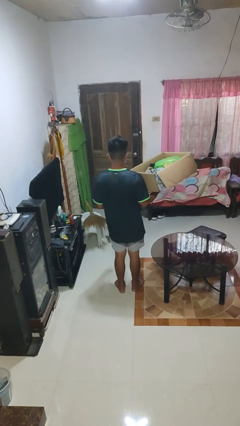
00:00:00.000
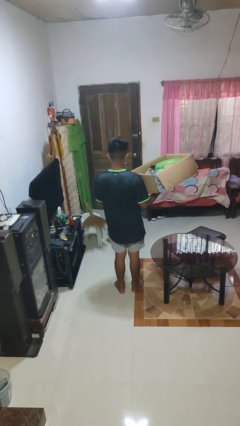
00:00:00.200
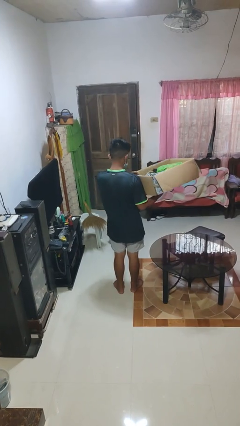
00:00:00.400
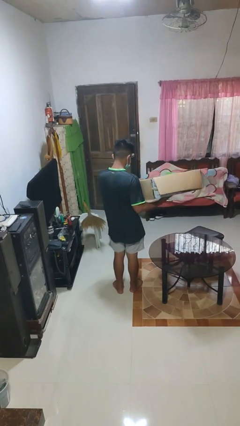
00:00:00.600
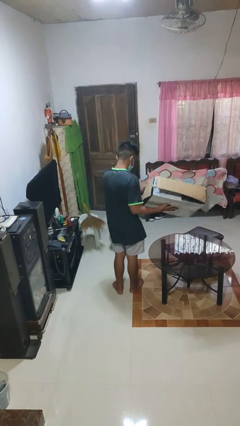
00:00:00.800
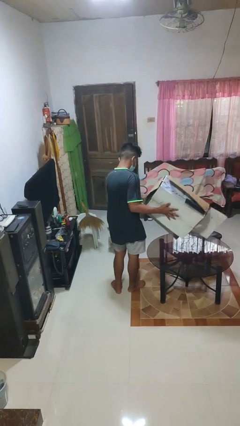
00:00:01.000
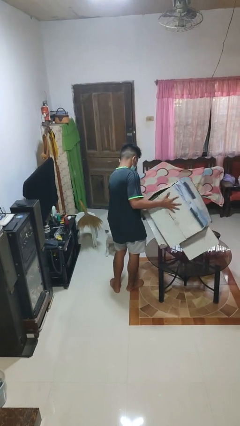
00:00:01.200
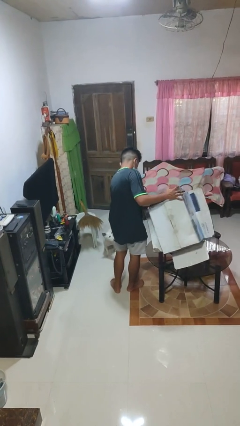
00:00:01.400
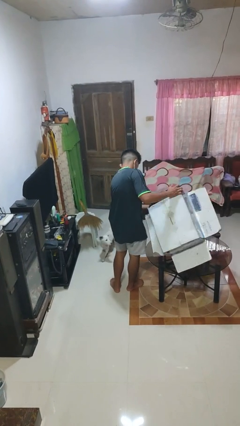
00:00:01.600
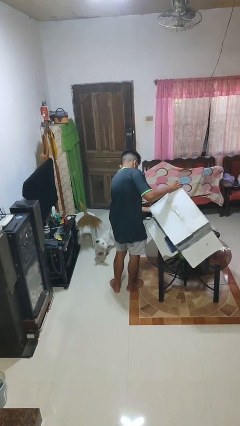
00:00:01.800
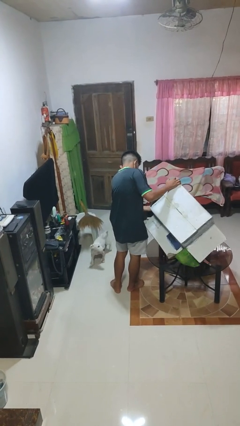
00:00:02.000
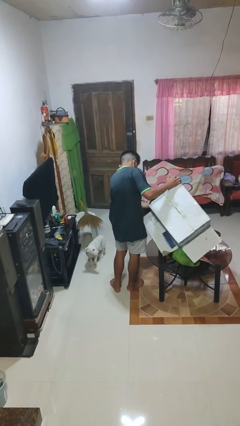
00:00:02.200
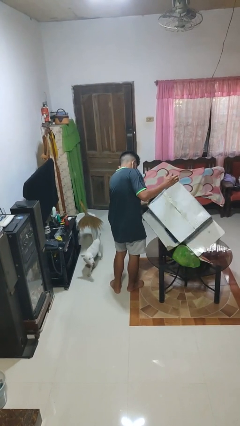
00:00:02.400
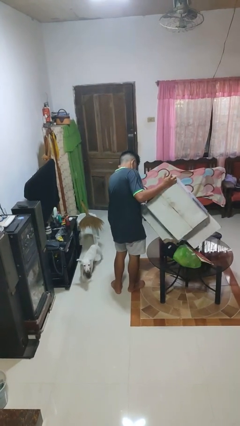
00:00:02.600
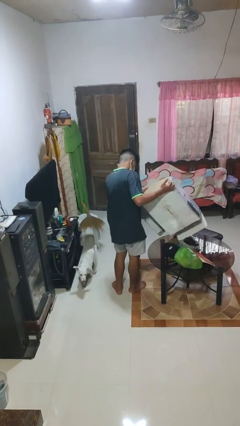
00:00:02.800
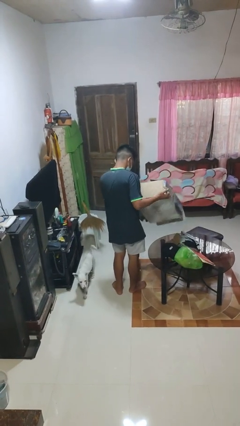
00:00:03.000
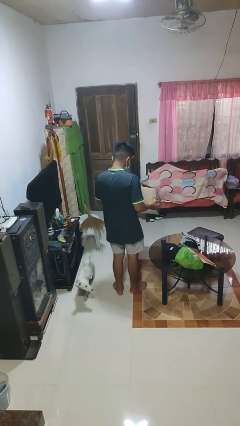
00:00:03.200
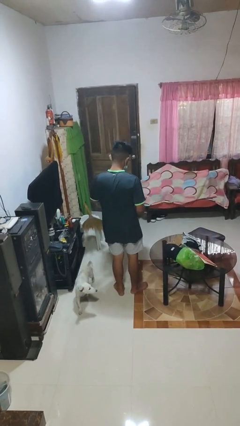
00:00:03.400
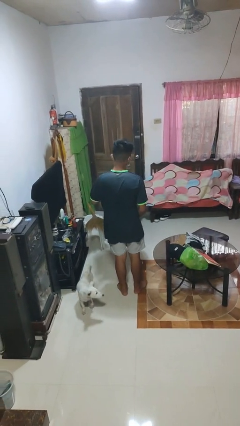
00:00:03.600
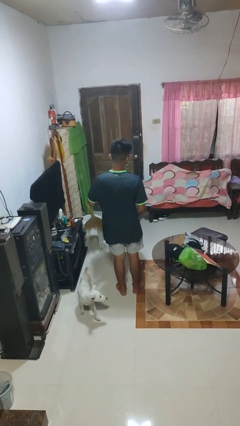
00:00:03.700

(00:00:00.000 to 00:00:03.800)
person unloads box onto table

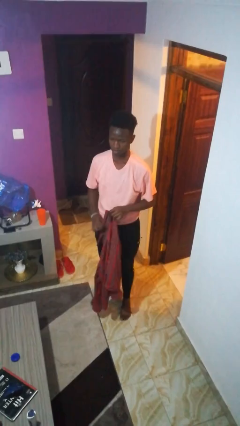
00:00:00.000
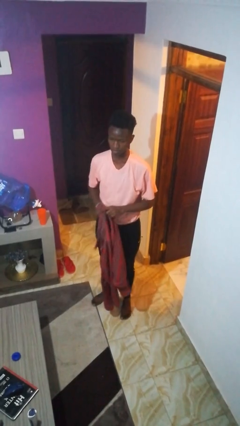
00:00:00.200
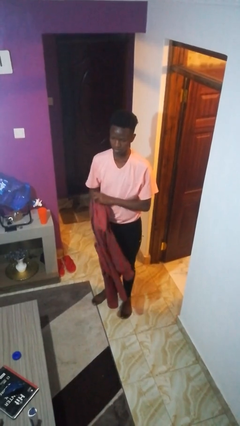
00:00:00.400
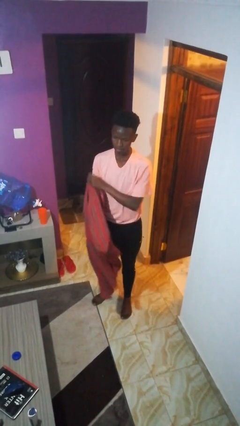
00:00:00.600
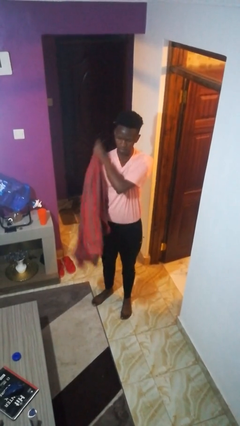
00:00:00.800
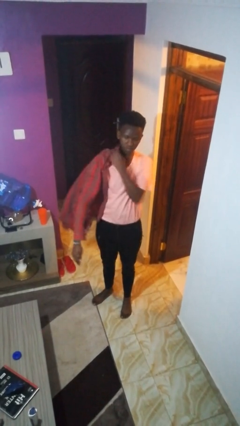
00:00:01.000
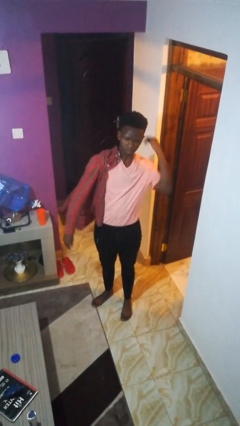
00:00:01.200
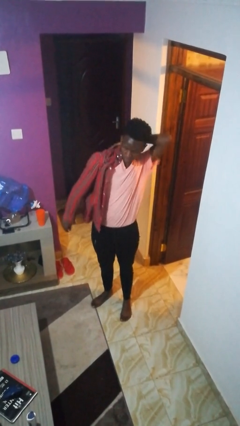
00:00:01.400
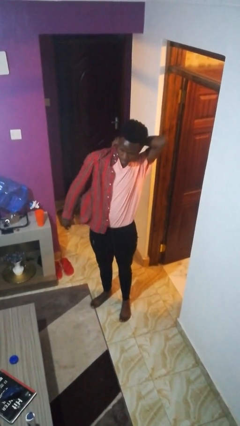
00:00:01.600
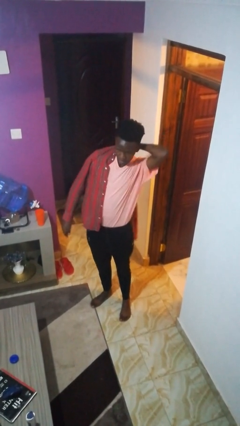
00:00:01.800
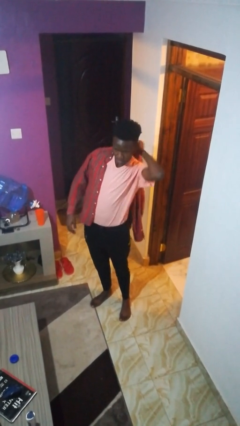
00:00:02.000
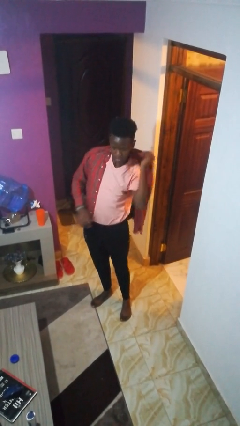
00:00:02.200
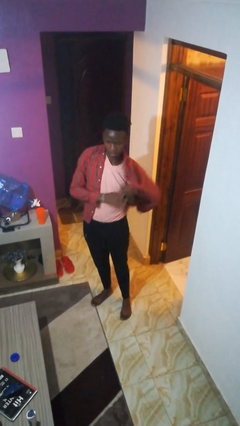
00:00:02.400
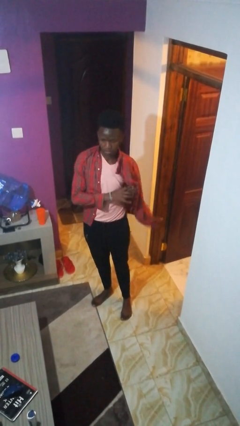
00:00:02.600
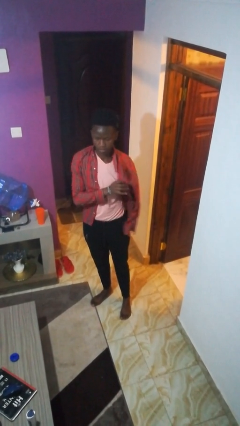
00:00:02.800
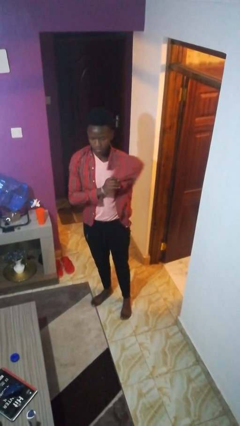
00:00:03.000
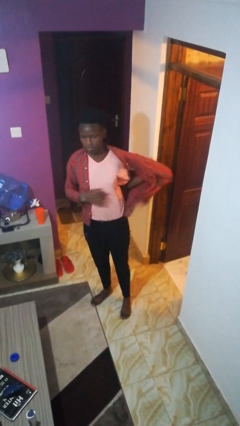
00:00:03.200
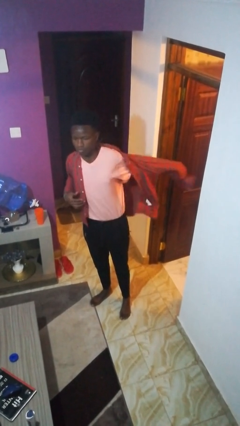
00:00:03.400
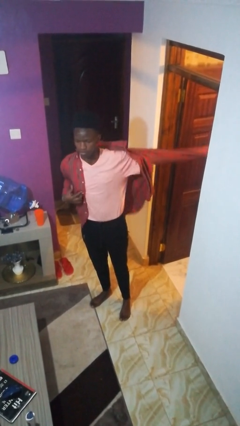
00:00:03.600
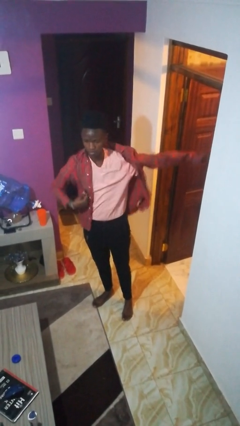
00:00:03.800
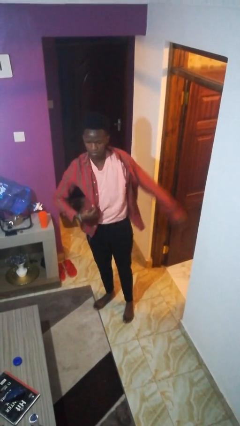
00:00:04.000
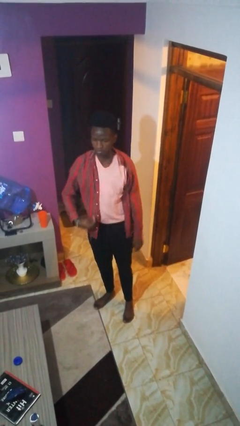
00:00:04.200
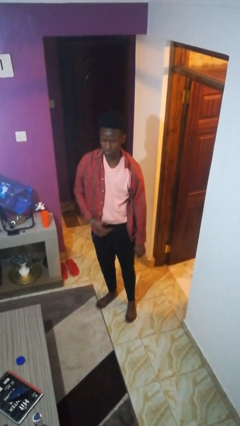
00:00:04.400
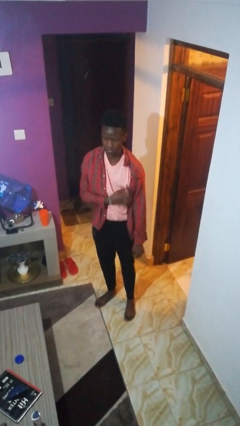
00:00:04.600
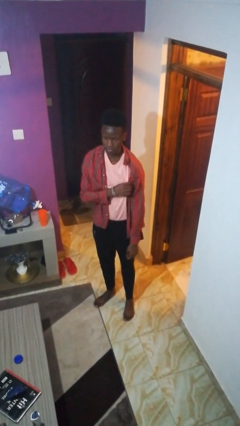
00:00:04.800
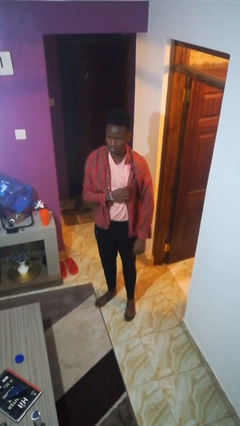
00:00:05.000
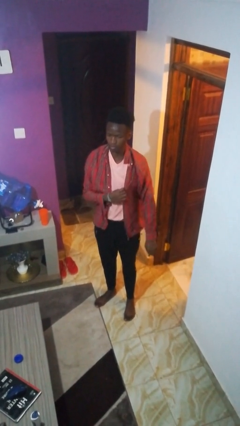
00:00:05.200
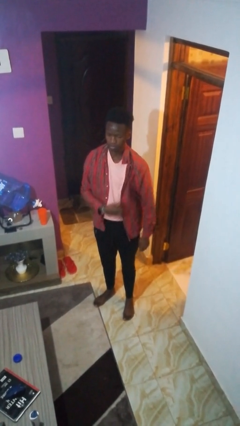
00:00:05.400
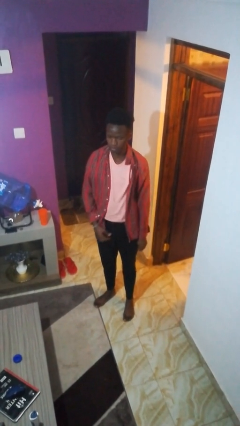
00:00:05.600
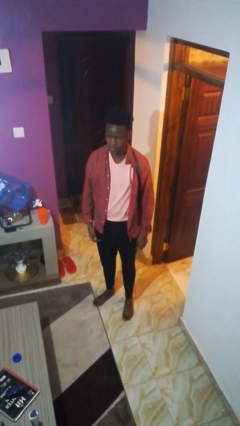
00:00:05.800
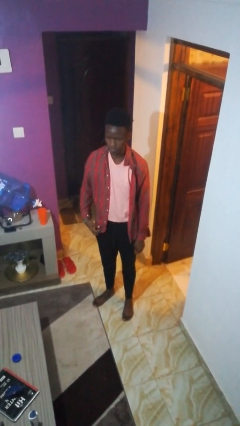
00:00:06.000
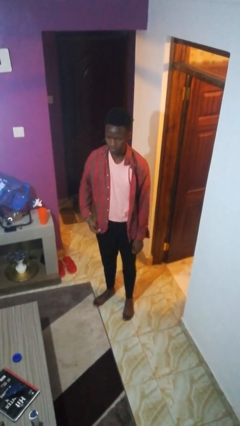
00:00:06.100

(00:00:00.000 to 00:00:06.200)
person puts on shirt

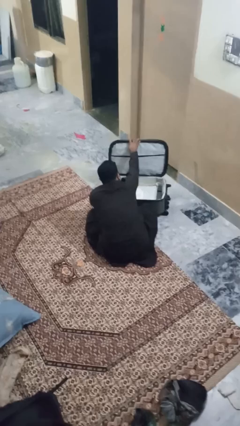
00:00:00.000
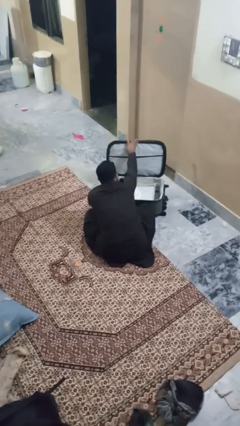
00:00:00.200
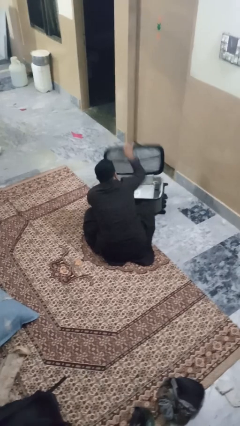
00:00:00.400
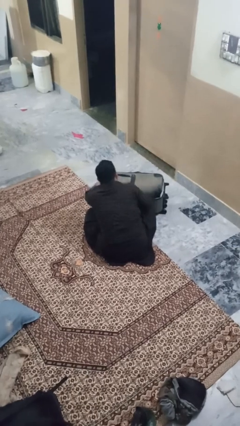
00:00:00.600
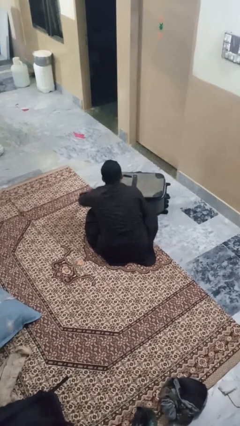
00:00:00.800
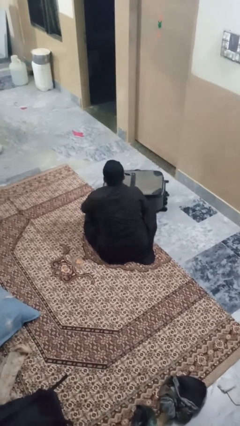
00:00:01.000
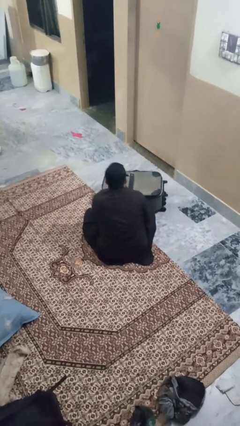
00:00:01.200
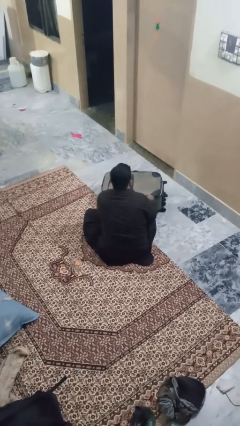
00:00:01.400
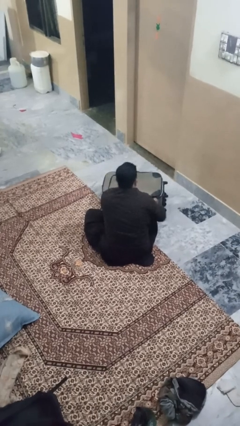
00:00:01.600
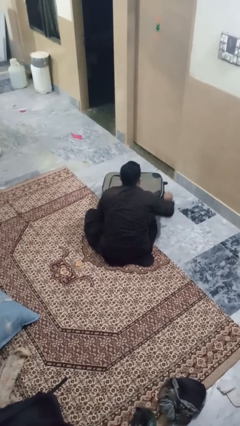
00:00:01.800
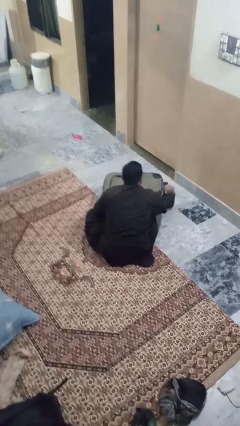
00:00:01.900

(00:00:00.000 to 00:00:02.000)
person closes suitcase

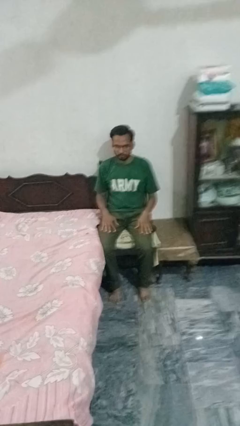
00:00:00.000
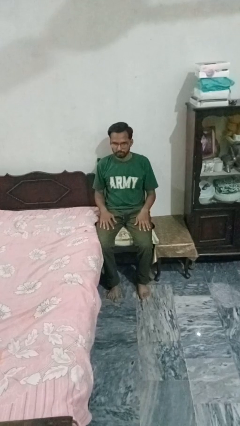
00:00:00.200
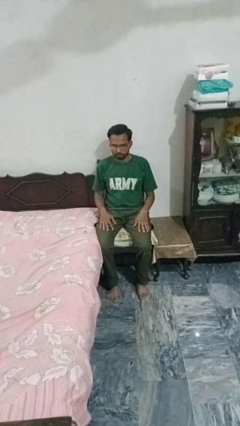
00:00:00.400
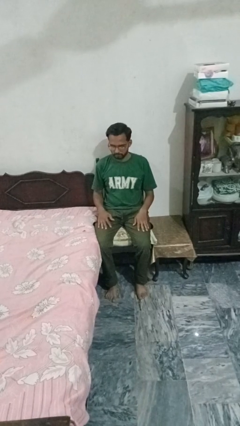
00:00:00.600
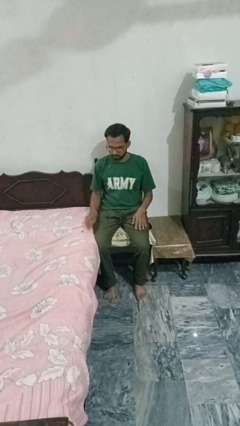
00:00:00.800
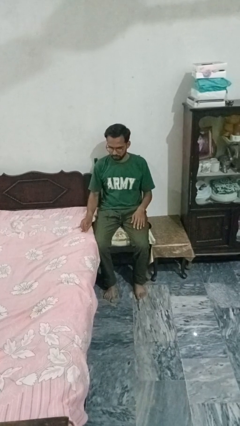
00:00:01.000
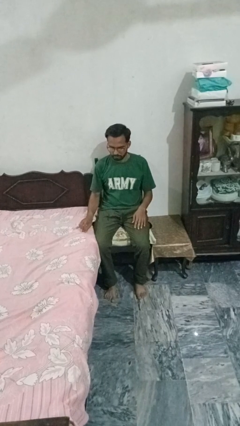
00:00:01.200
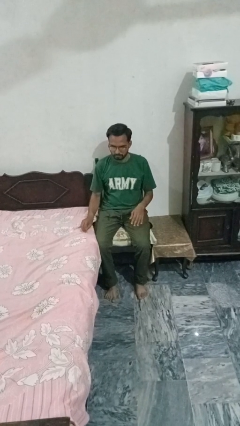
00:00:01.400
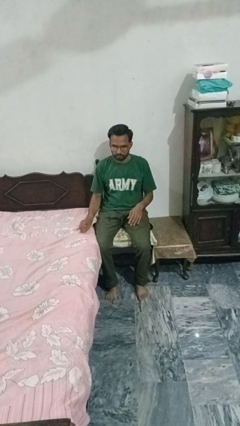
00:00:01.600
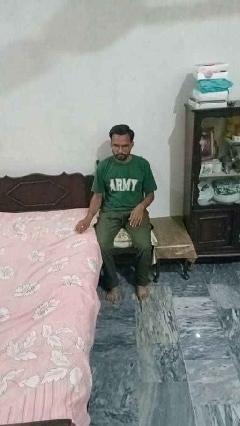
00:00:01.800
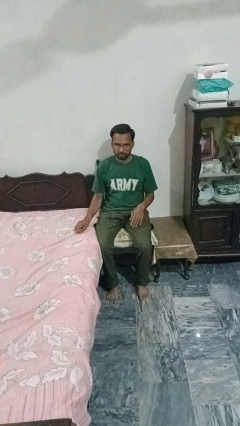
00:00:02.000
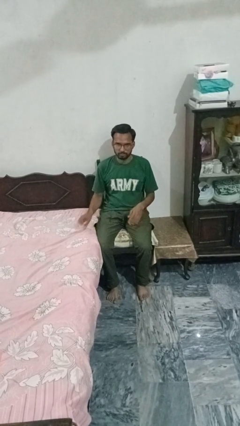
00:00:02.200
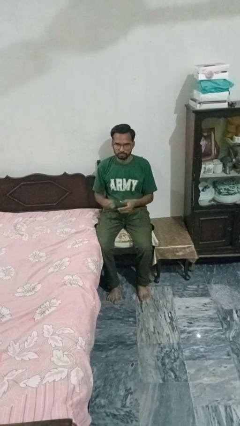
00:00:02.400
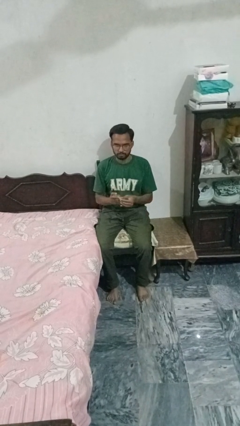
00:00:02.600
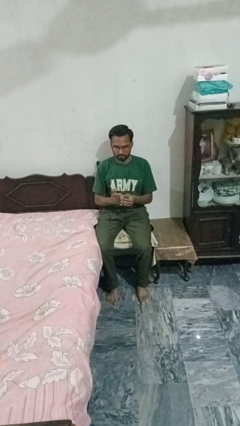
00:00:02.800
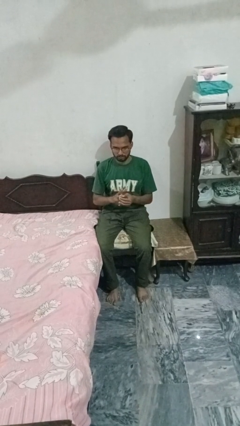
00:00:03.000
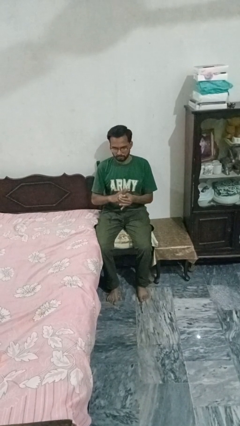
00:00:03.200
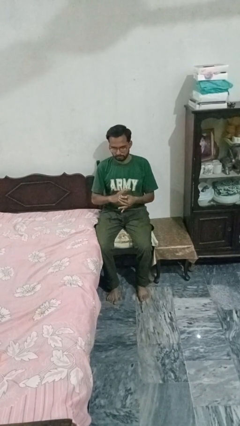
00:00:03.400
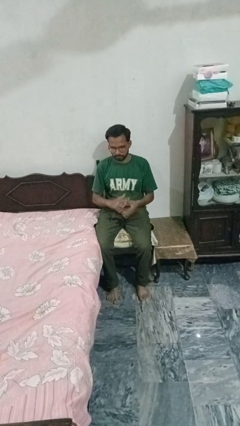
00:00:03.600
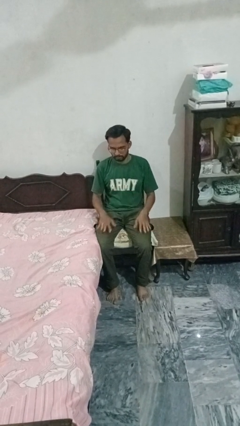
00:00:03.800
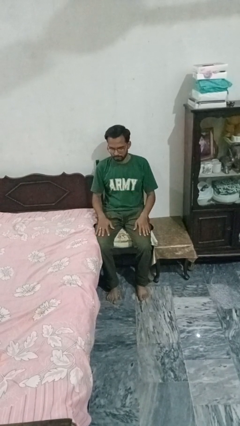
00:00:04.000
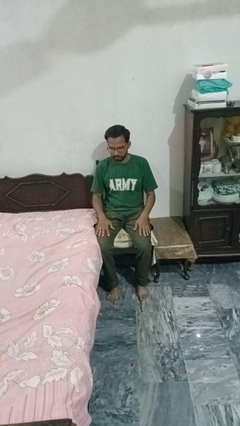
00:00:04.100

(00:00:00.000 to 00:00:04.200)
person puts on ring

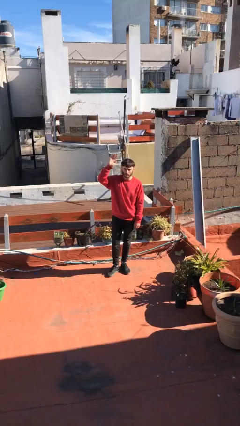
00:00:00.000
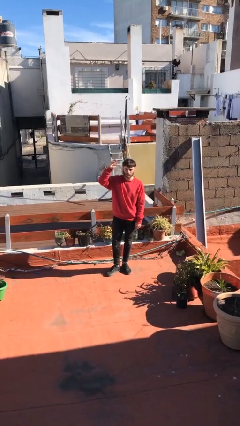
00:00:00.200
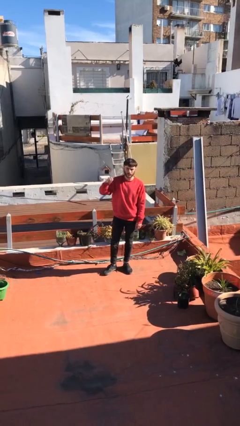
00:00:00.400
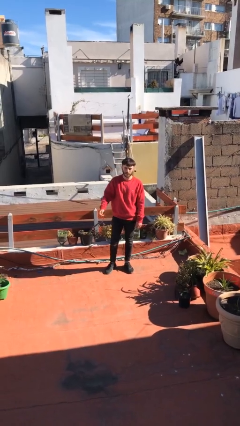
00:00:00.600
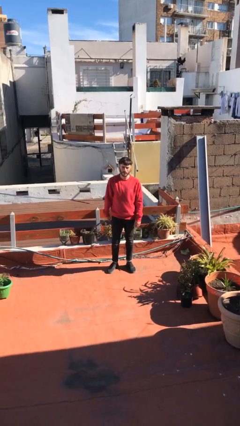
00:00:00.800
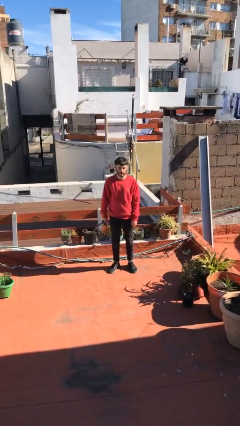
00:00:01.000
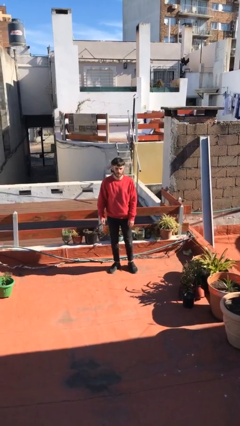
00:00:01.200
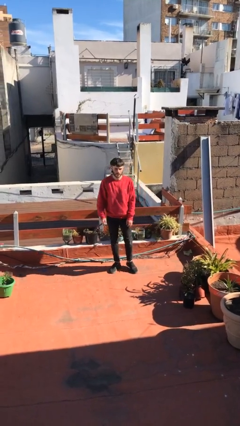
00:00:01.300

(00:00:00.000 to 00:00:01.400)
person gestures lower hand
